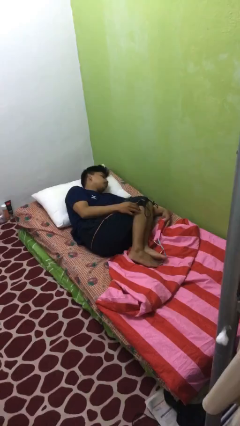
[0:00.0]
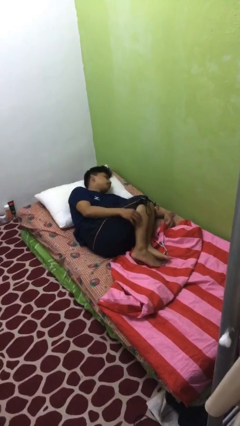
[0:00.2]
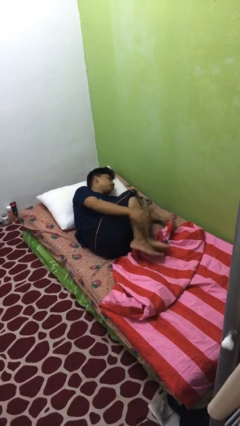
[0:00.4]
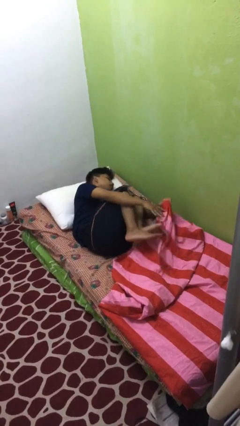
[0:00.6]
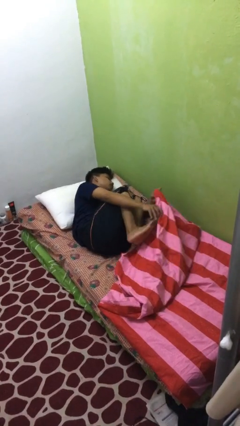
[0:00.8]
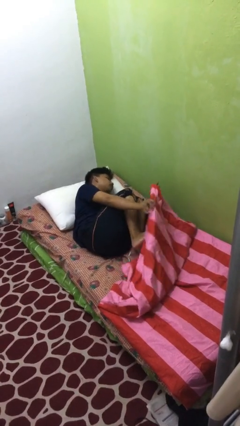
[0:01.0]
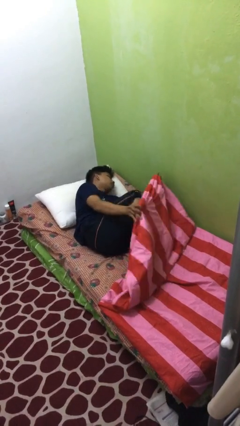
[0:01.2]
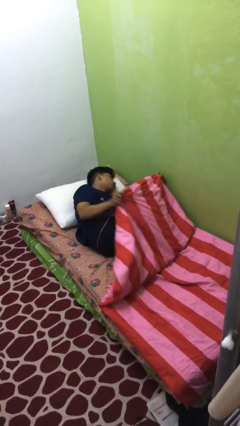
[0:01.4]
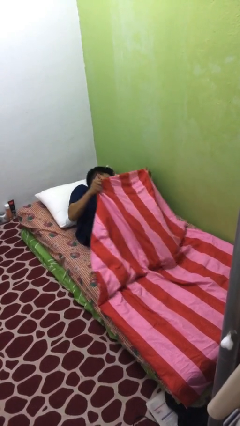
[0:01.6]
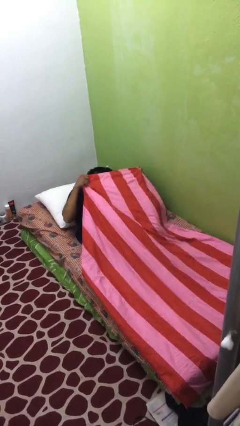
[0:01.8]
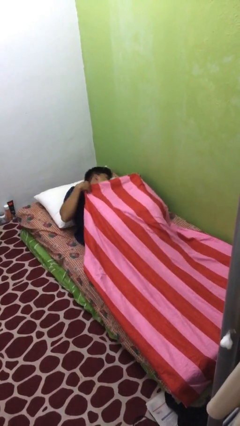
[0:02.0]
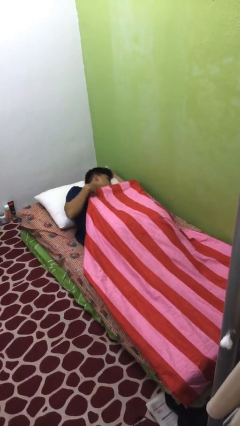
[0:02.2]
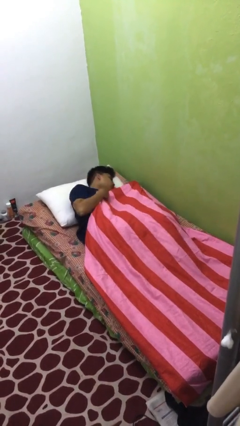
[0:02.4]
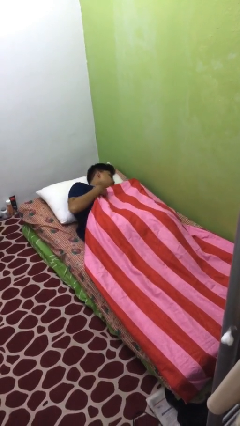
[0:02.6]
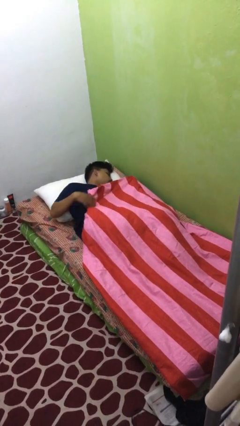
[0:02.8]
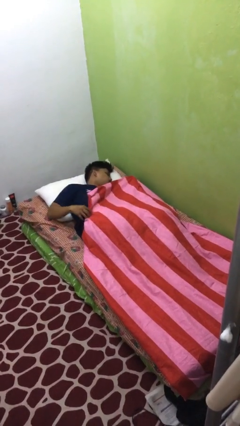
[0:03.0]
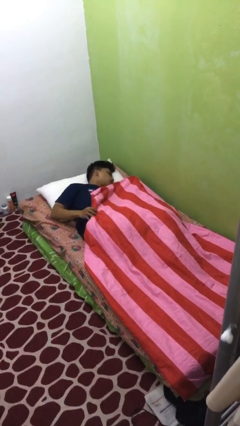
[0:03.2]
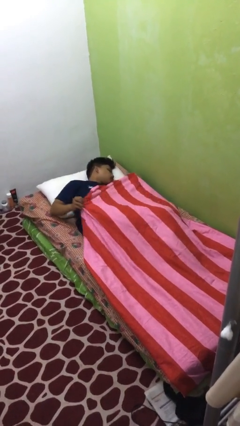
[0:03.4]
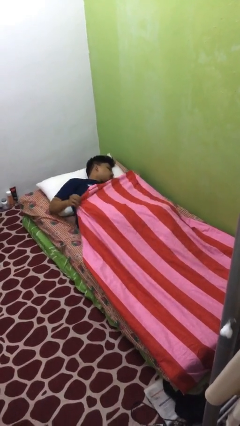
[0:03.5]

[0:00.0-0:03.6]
person covers with bedsheets

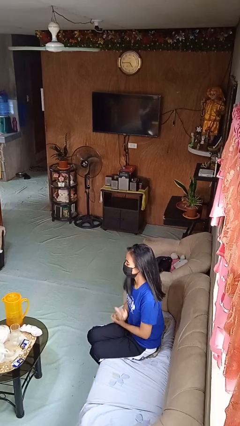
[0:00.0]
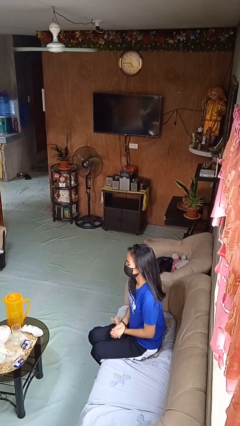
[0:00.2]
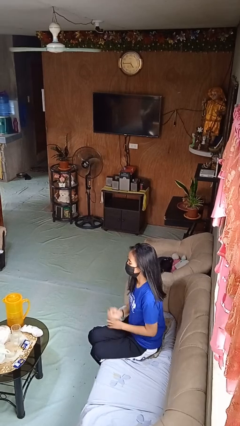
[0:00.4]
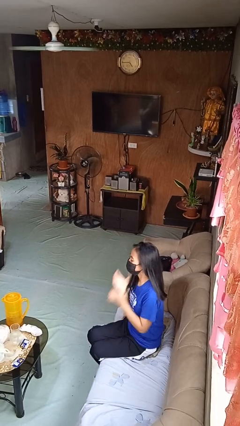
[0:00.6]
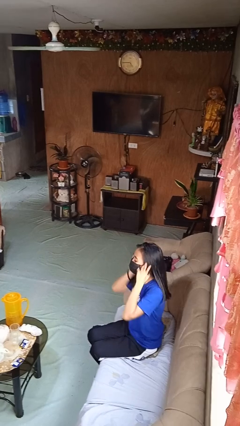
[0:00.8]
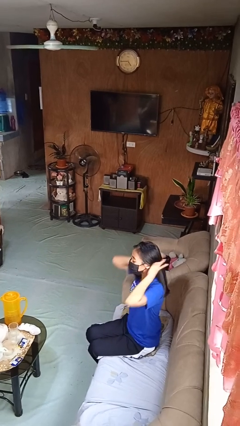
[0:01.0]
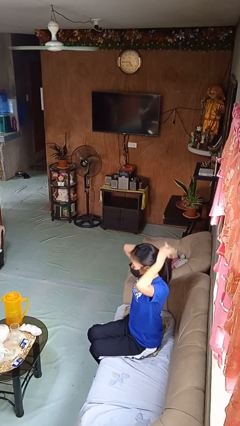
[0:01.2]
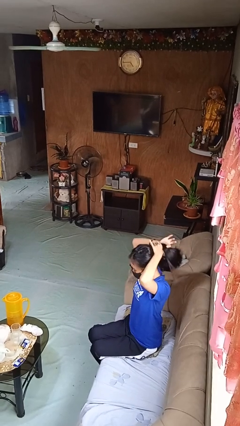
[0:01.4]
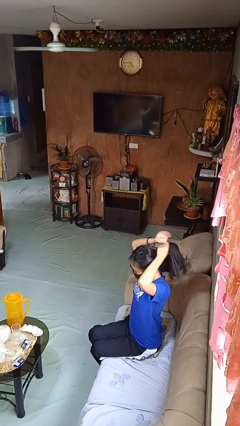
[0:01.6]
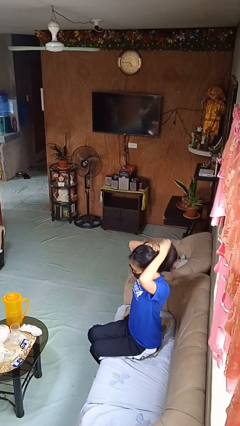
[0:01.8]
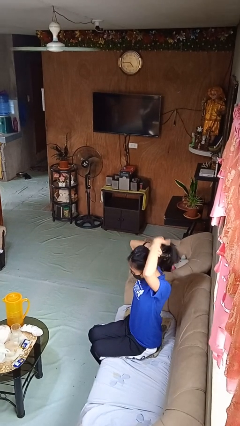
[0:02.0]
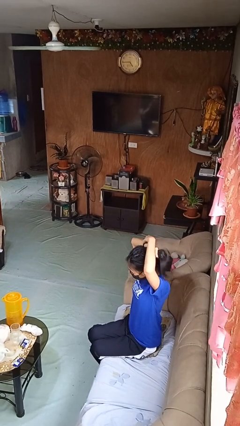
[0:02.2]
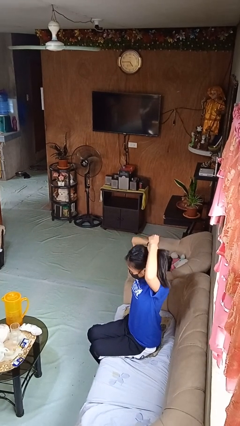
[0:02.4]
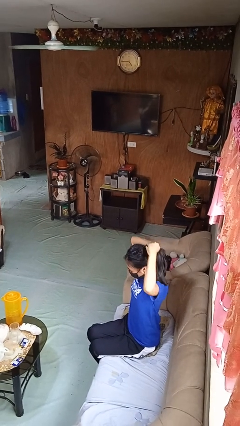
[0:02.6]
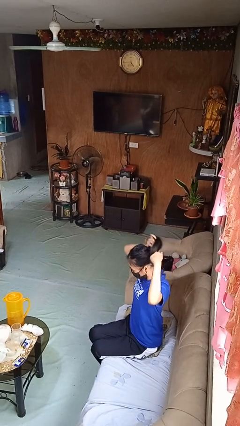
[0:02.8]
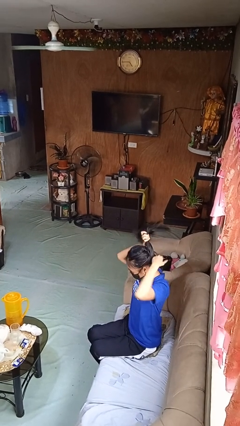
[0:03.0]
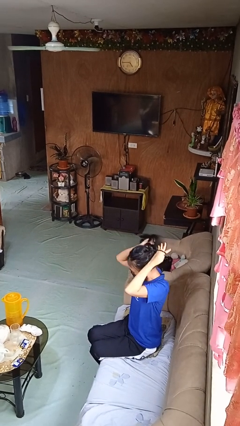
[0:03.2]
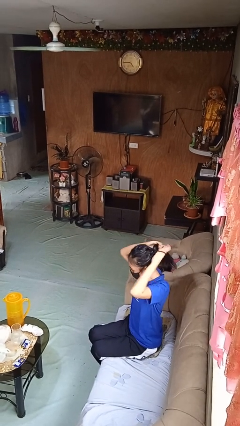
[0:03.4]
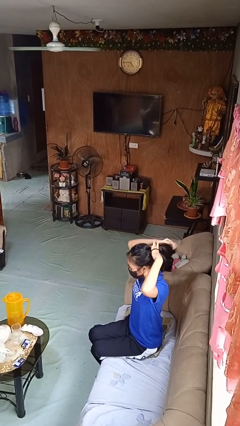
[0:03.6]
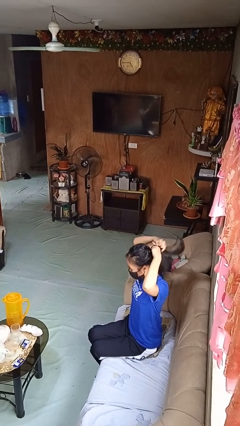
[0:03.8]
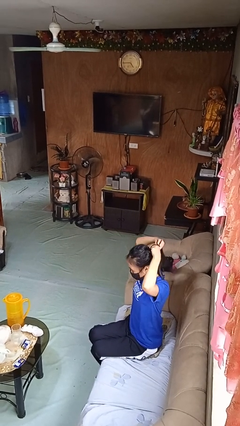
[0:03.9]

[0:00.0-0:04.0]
person puts hair in ponytail

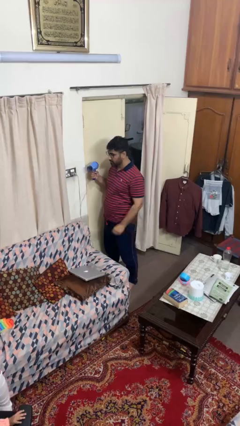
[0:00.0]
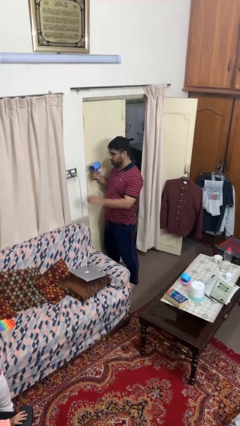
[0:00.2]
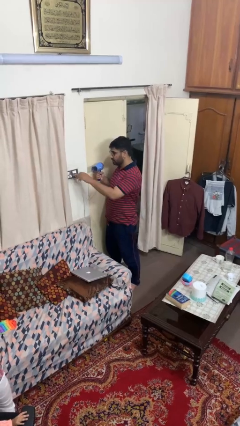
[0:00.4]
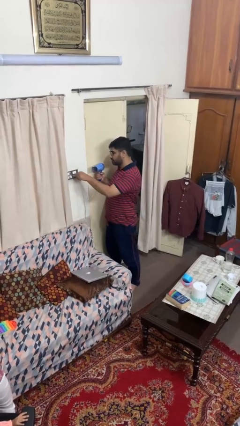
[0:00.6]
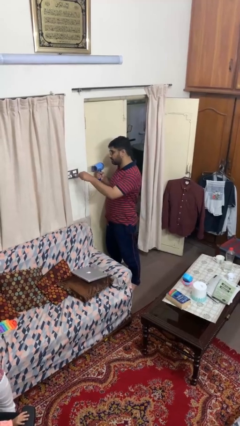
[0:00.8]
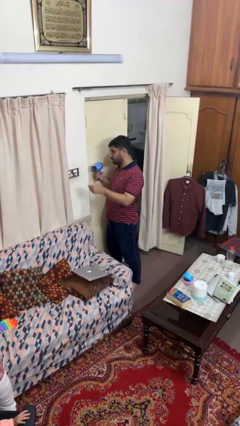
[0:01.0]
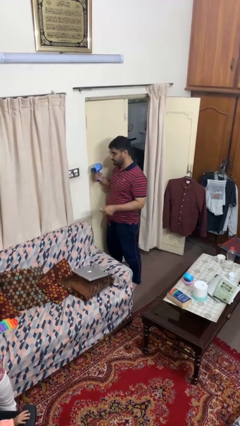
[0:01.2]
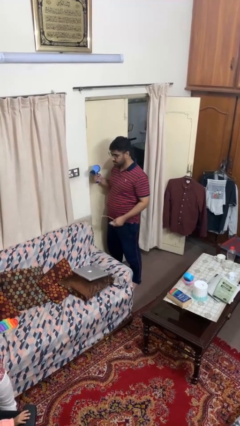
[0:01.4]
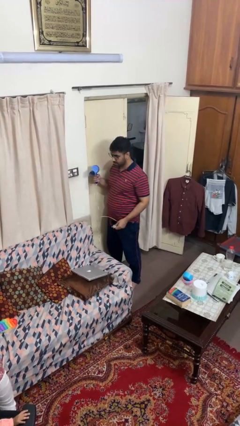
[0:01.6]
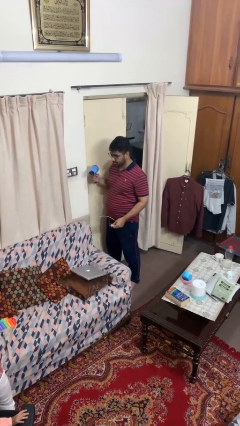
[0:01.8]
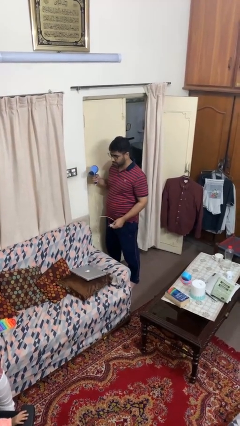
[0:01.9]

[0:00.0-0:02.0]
person unplugs from electrical socket

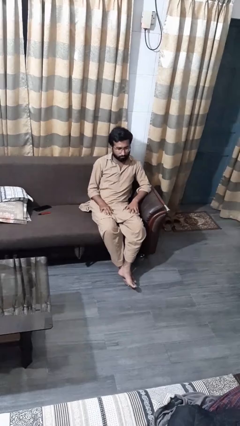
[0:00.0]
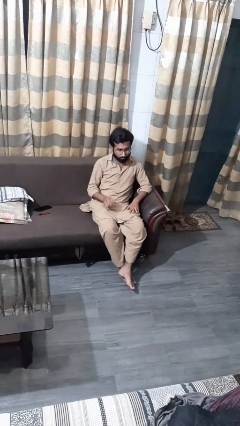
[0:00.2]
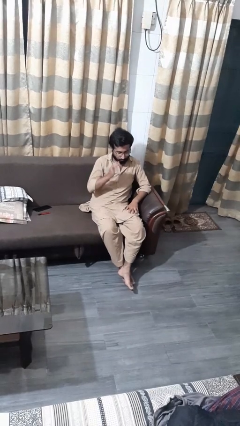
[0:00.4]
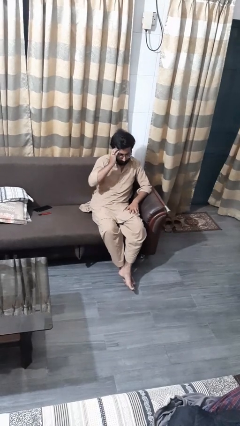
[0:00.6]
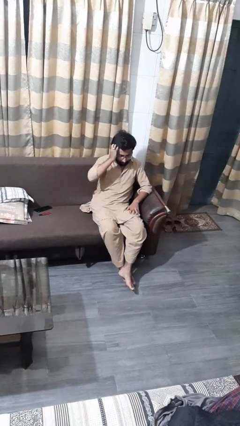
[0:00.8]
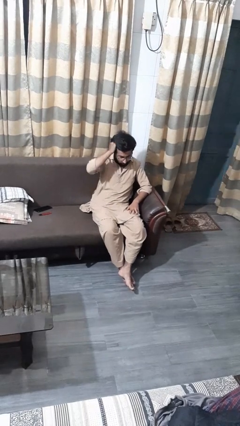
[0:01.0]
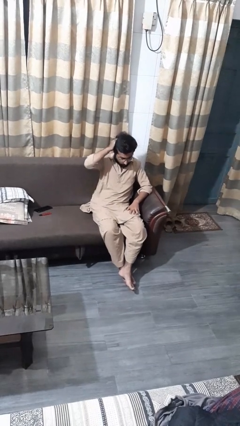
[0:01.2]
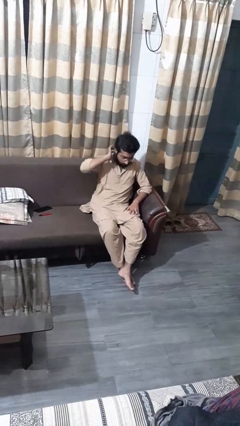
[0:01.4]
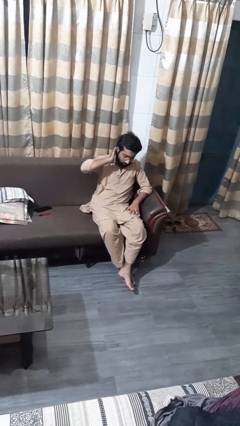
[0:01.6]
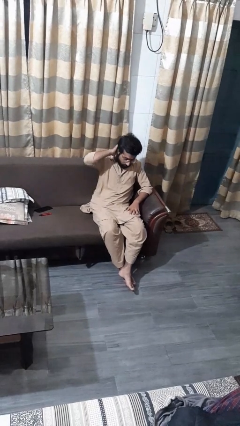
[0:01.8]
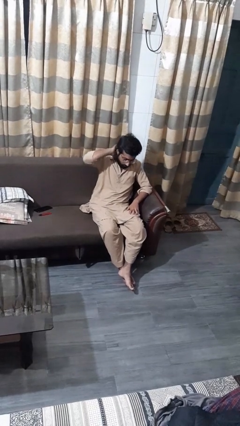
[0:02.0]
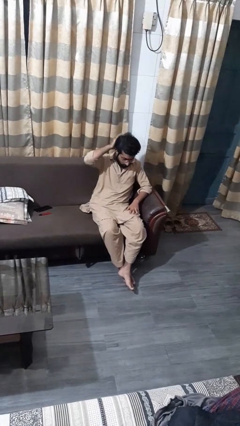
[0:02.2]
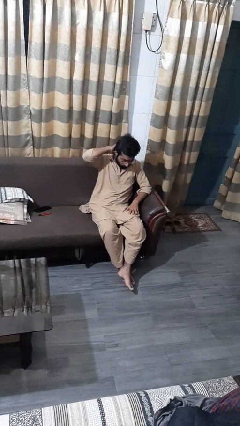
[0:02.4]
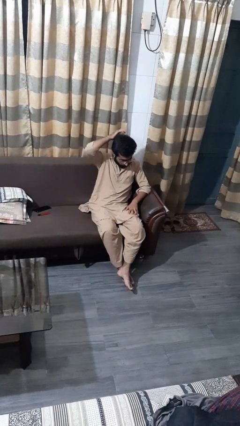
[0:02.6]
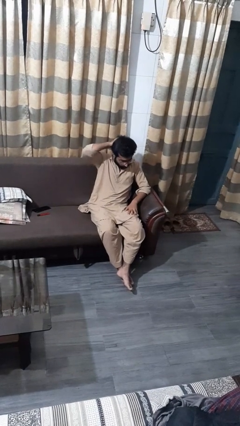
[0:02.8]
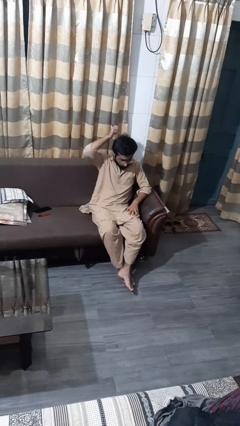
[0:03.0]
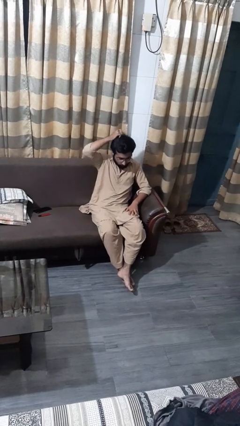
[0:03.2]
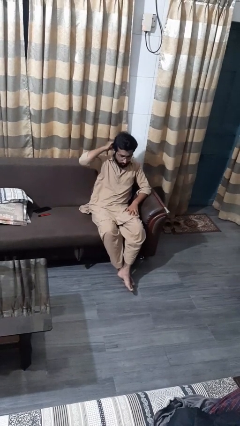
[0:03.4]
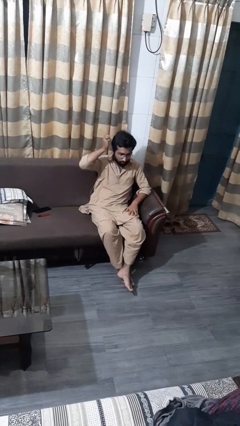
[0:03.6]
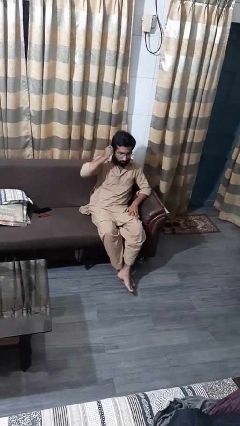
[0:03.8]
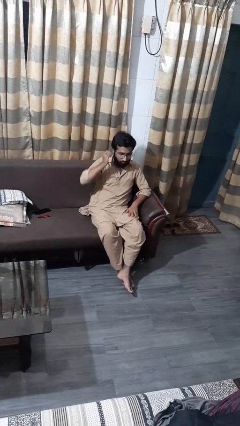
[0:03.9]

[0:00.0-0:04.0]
person strokes hair

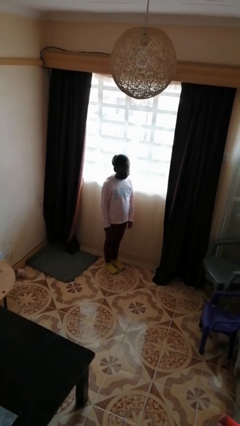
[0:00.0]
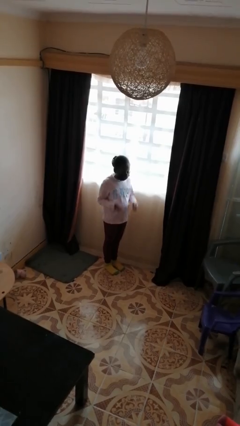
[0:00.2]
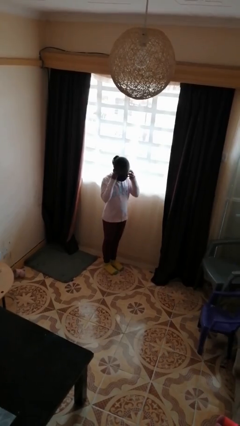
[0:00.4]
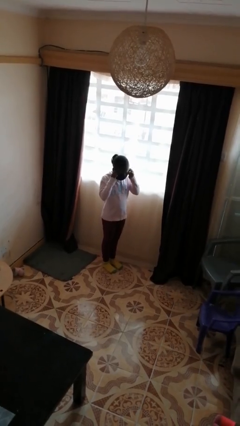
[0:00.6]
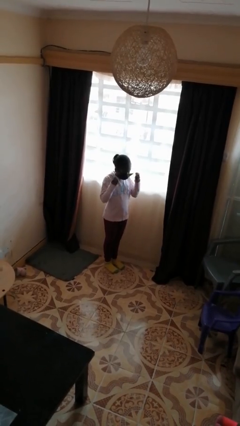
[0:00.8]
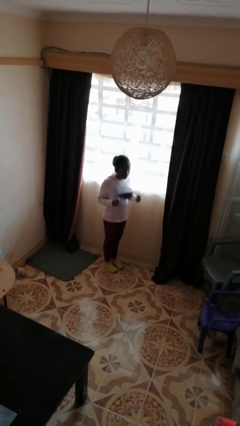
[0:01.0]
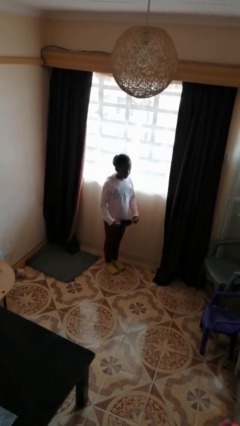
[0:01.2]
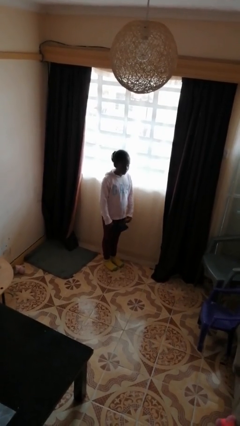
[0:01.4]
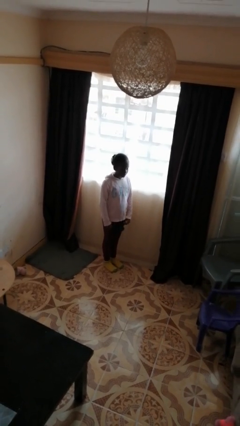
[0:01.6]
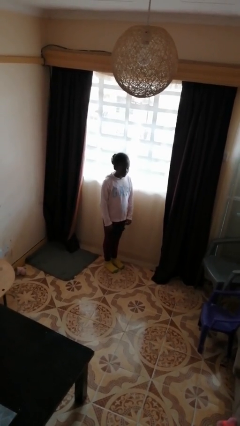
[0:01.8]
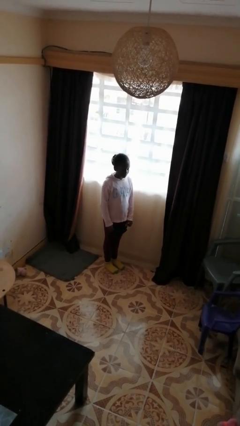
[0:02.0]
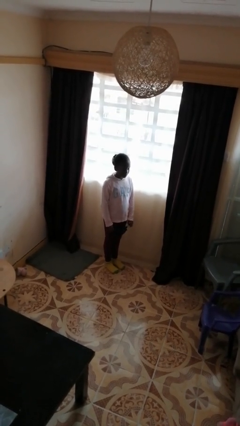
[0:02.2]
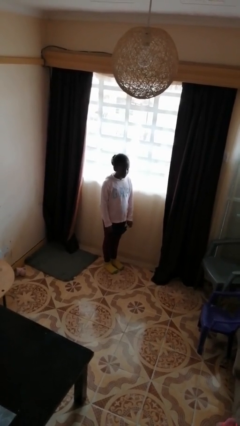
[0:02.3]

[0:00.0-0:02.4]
person takes off facemask

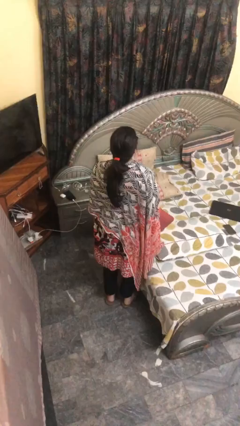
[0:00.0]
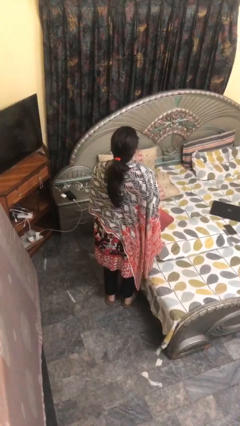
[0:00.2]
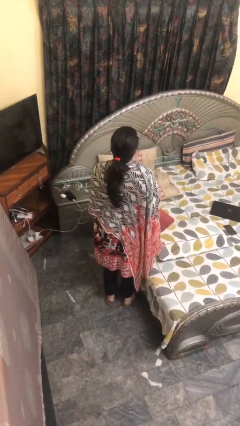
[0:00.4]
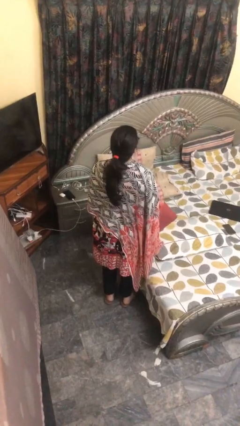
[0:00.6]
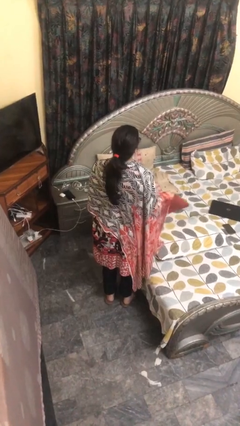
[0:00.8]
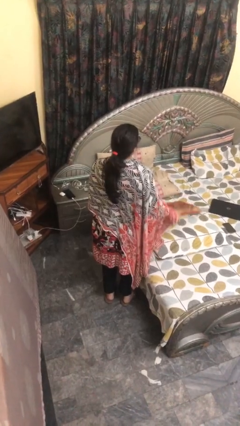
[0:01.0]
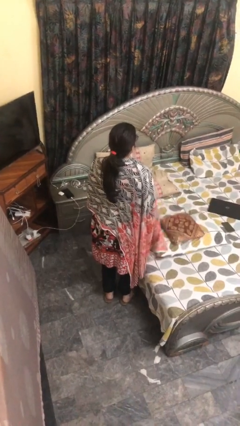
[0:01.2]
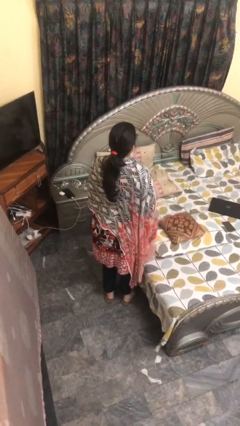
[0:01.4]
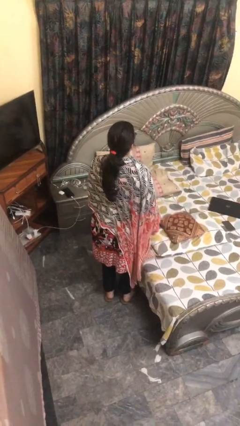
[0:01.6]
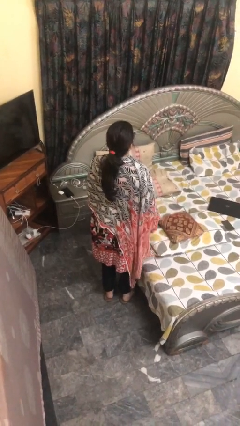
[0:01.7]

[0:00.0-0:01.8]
person throws object on bed
